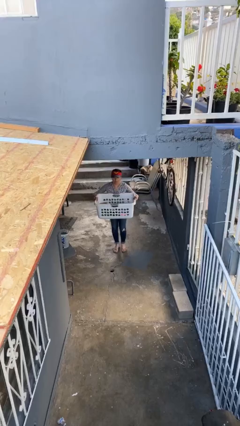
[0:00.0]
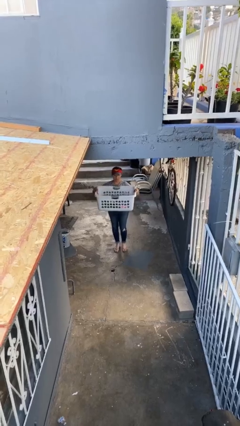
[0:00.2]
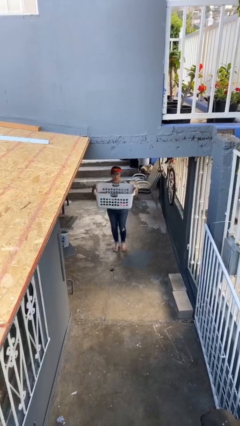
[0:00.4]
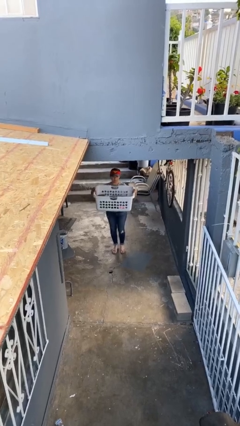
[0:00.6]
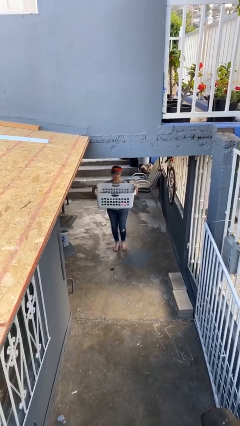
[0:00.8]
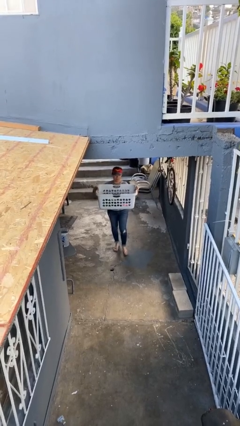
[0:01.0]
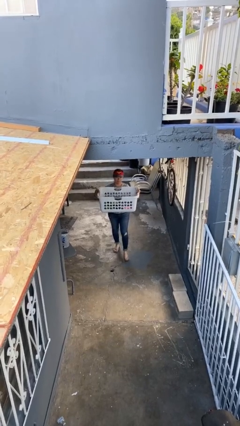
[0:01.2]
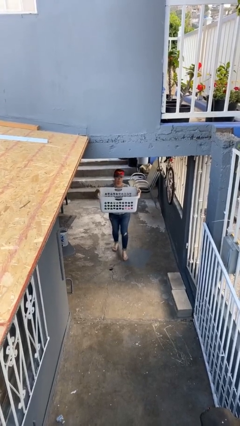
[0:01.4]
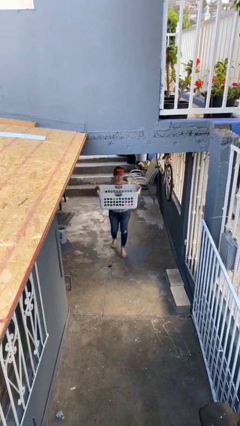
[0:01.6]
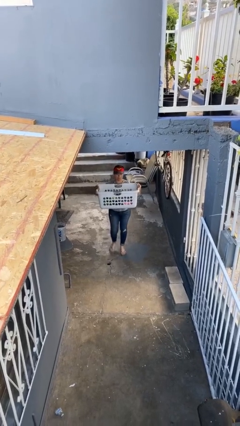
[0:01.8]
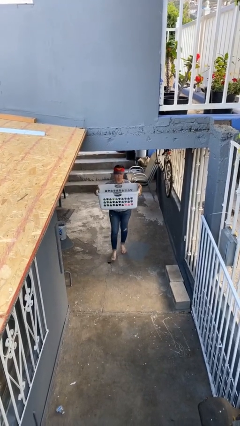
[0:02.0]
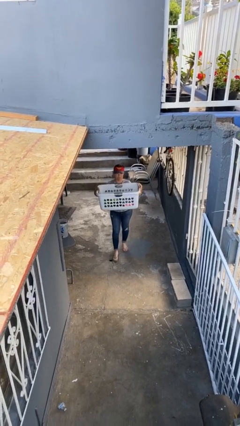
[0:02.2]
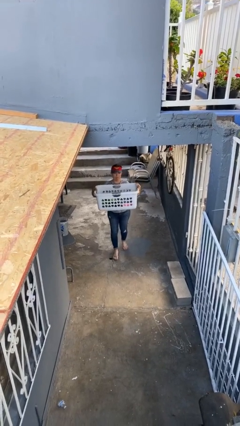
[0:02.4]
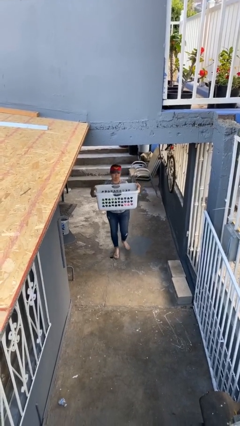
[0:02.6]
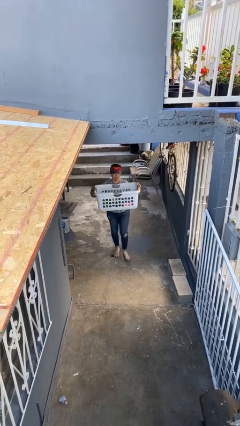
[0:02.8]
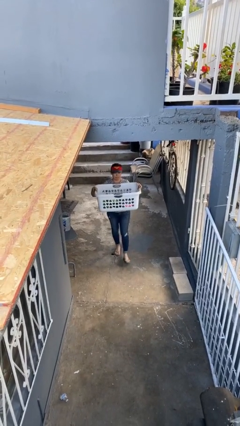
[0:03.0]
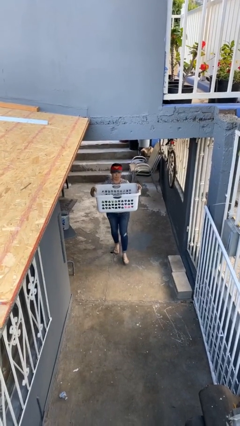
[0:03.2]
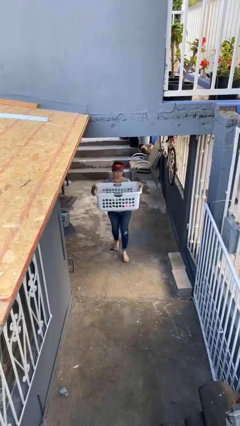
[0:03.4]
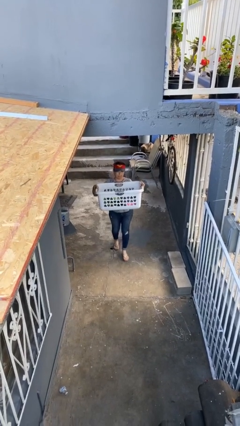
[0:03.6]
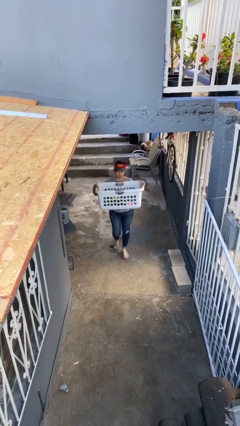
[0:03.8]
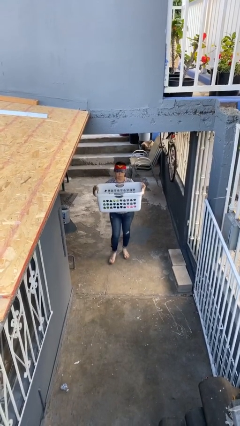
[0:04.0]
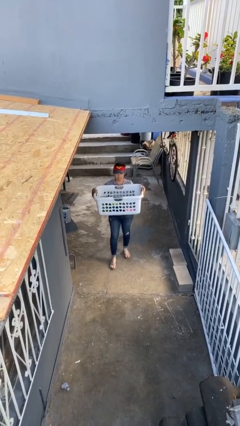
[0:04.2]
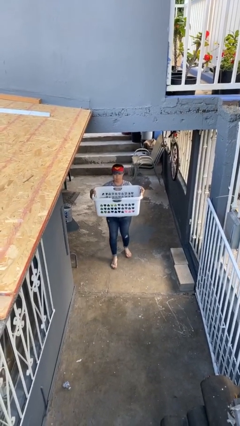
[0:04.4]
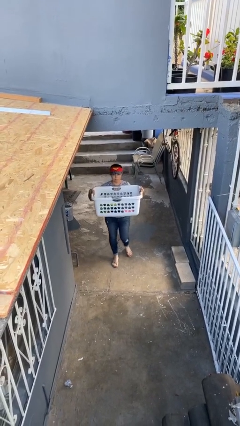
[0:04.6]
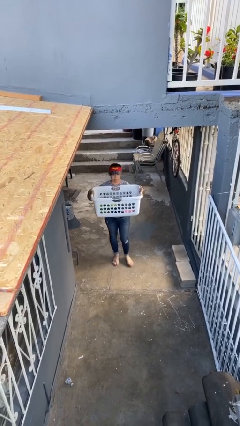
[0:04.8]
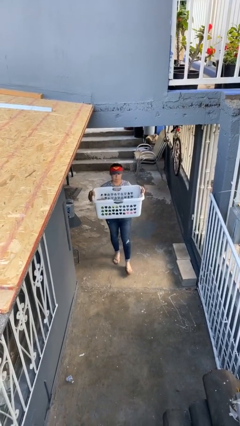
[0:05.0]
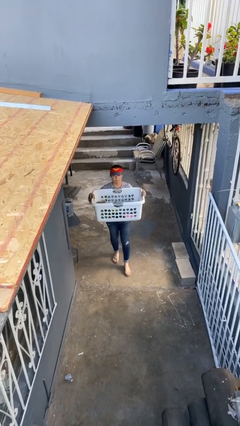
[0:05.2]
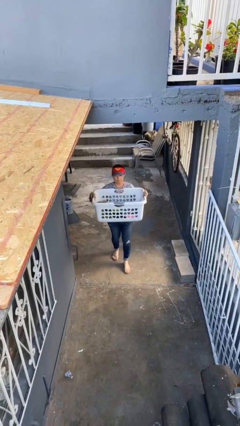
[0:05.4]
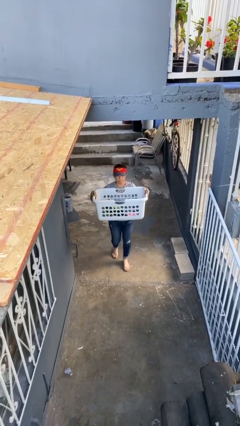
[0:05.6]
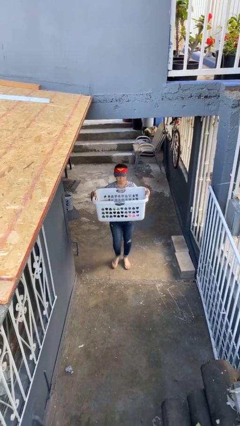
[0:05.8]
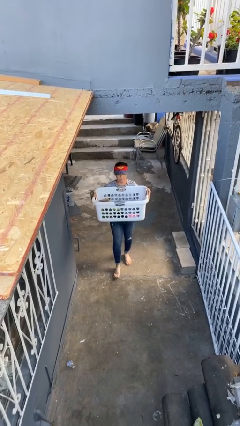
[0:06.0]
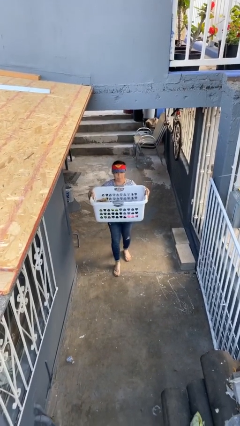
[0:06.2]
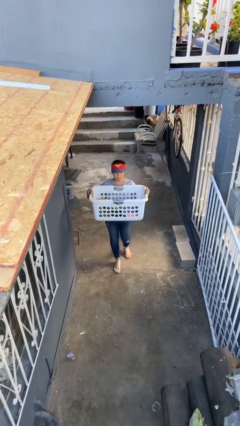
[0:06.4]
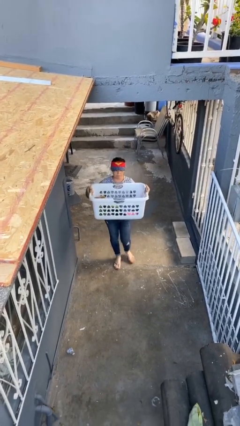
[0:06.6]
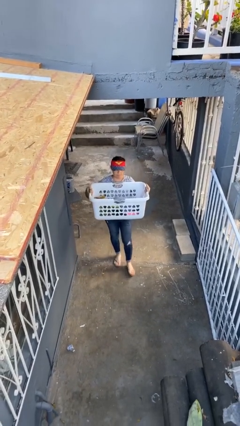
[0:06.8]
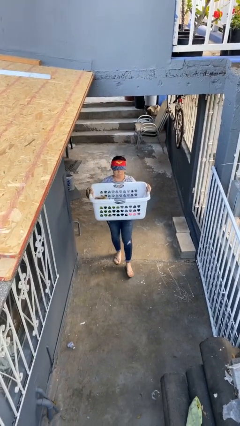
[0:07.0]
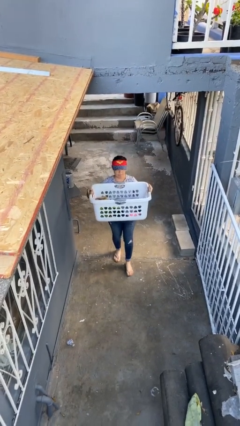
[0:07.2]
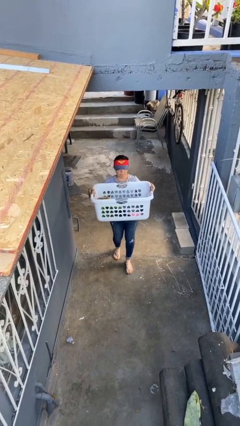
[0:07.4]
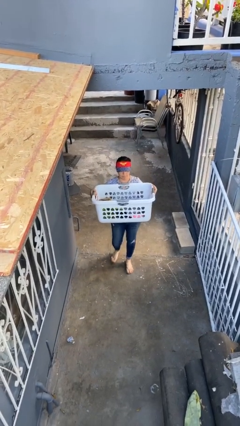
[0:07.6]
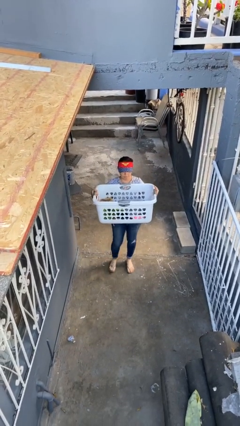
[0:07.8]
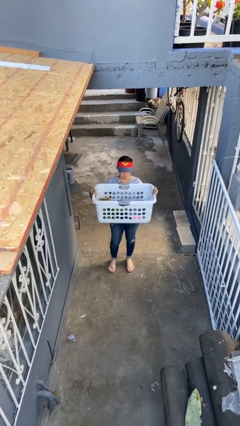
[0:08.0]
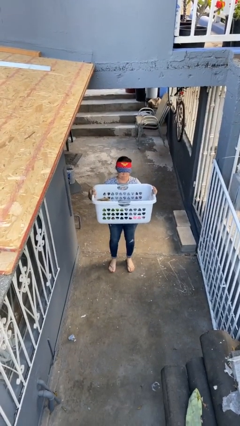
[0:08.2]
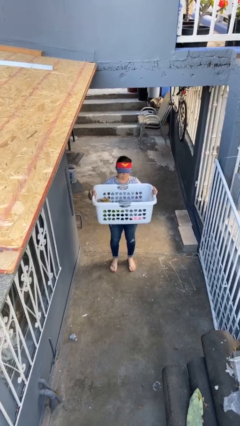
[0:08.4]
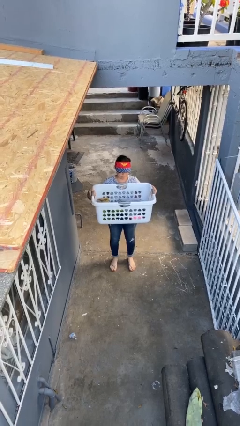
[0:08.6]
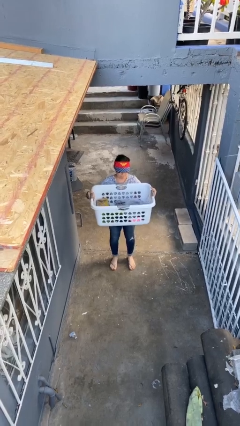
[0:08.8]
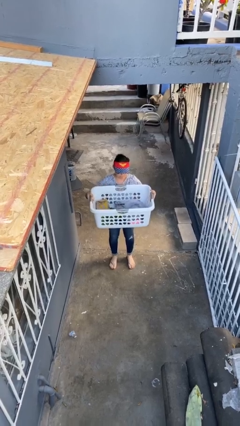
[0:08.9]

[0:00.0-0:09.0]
person carries heavy object

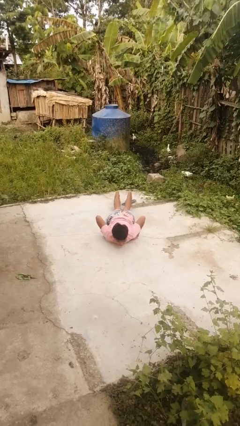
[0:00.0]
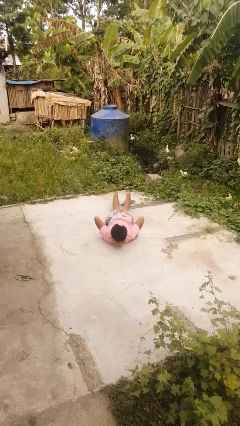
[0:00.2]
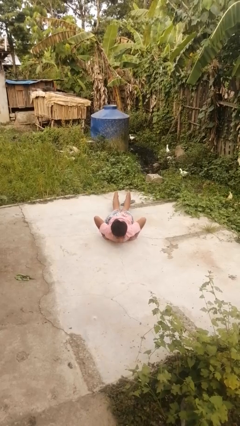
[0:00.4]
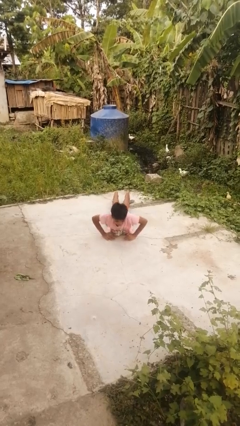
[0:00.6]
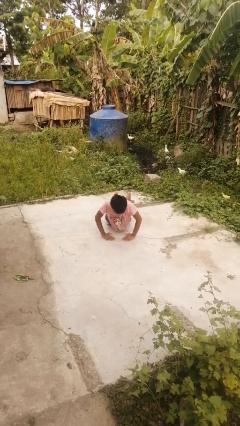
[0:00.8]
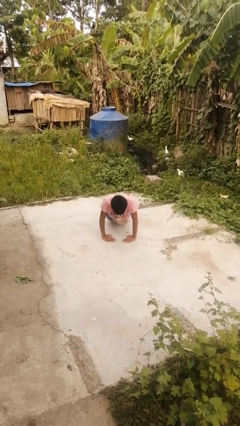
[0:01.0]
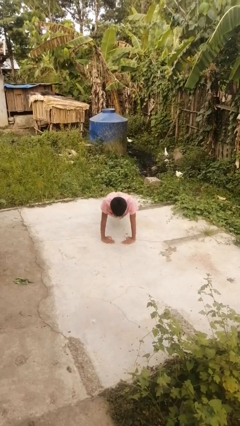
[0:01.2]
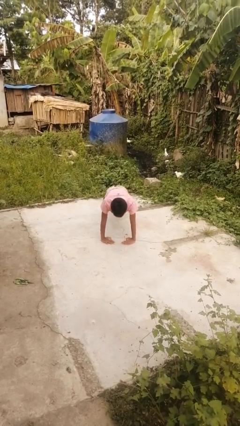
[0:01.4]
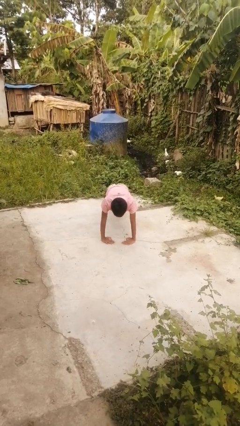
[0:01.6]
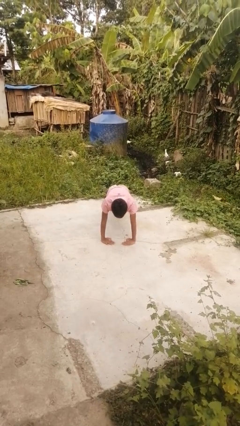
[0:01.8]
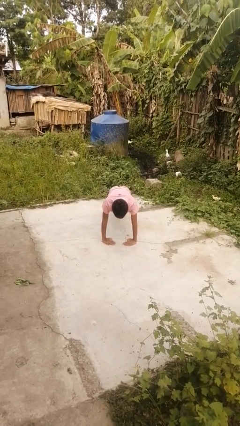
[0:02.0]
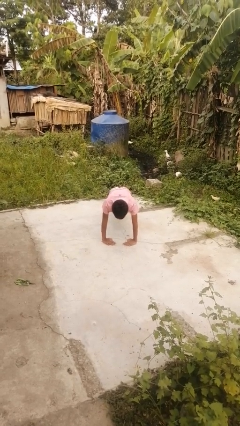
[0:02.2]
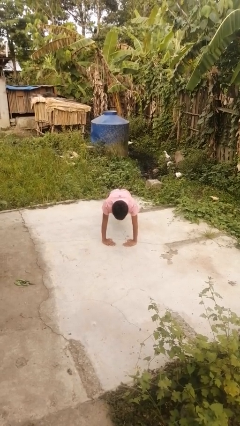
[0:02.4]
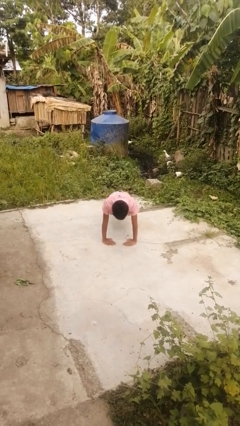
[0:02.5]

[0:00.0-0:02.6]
person exercises with pushup

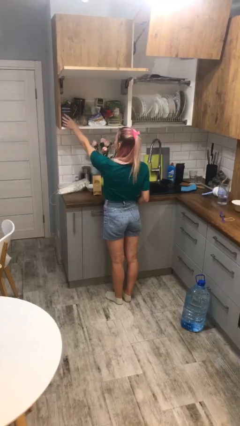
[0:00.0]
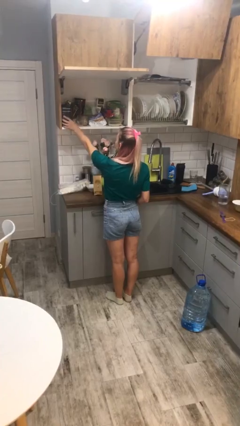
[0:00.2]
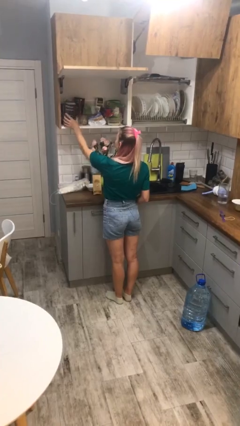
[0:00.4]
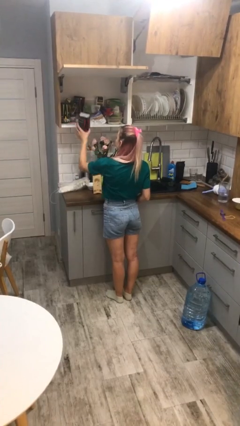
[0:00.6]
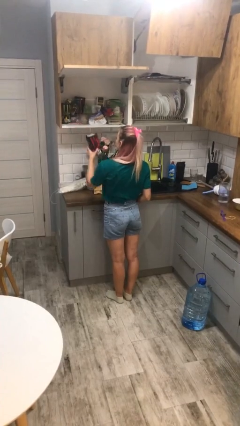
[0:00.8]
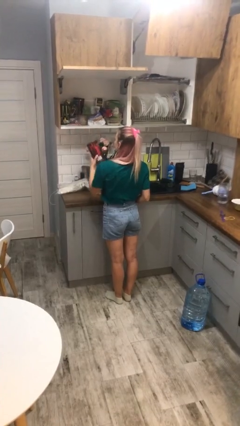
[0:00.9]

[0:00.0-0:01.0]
person picks up object from cabinet

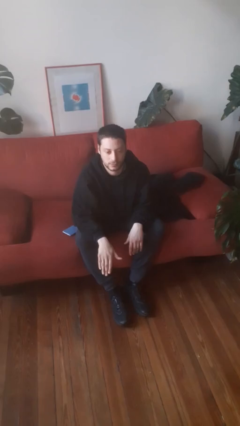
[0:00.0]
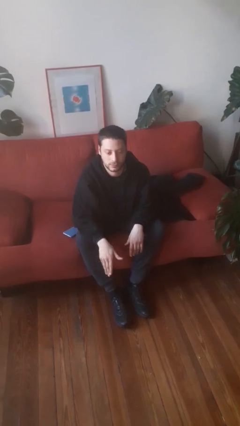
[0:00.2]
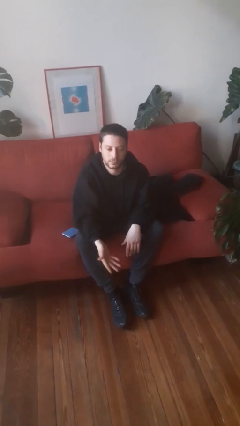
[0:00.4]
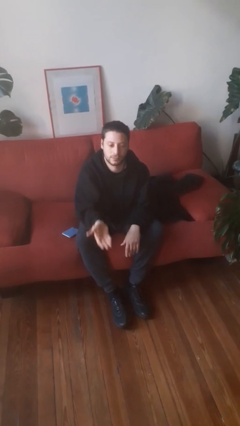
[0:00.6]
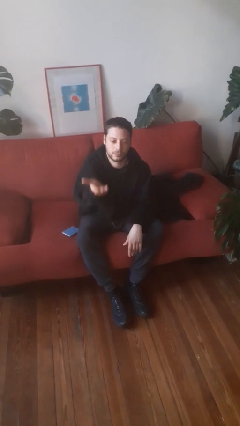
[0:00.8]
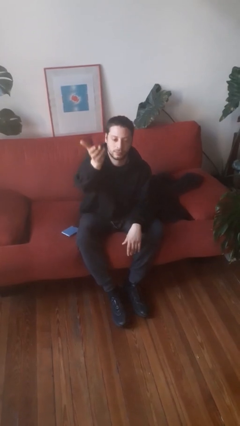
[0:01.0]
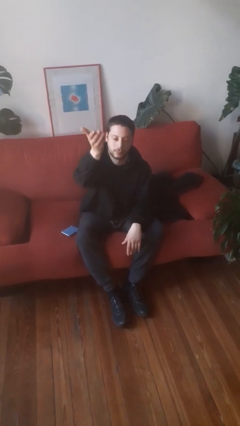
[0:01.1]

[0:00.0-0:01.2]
person gestures swipe up

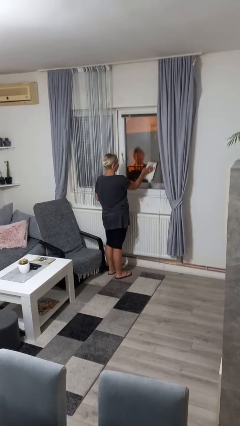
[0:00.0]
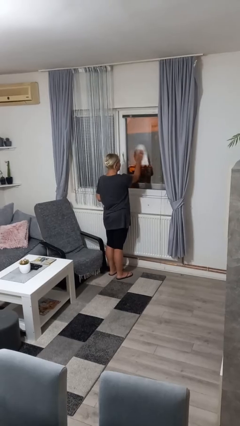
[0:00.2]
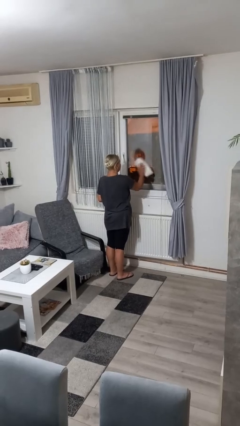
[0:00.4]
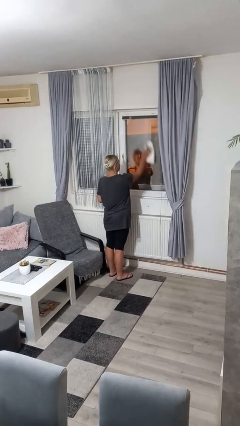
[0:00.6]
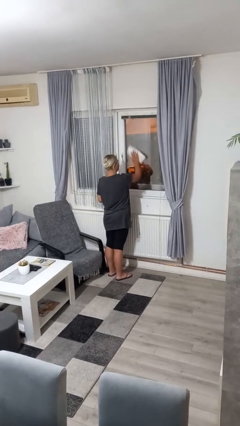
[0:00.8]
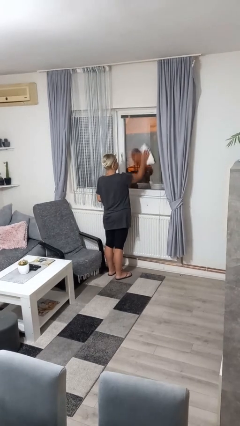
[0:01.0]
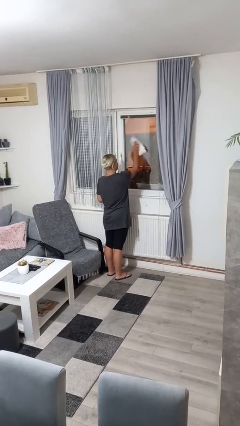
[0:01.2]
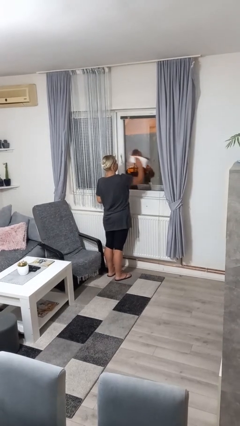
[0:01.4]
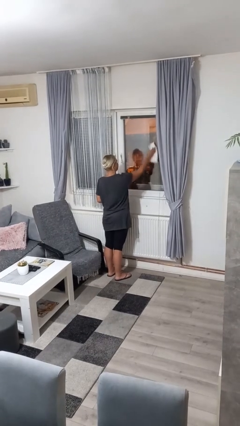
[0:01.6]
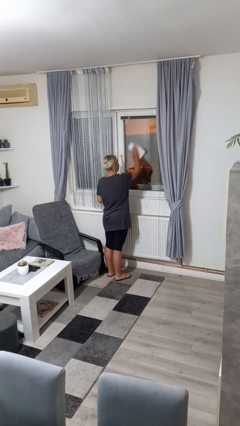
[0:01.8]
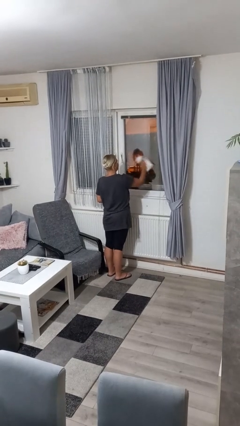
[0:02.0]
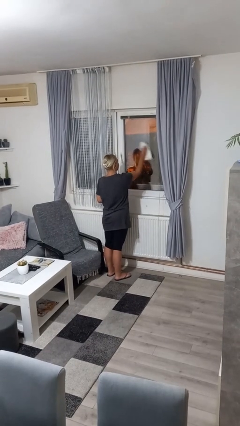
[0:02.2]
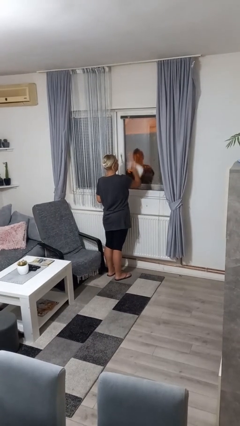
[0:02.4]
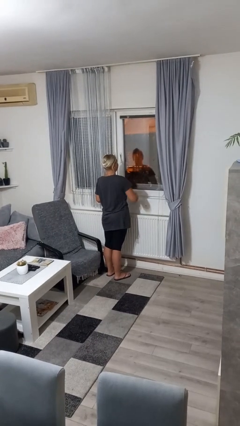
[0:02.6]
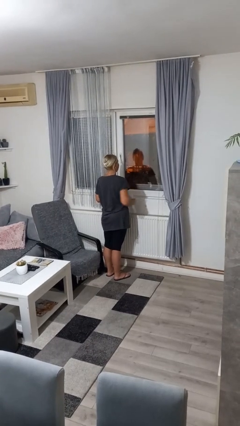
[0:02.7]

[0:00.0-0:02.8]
person washes window

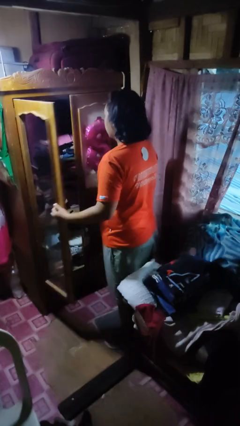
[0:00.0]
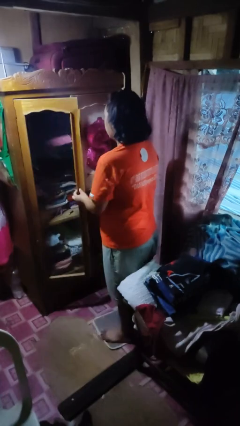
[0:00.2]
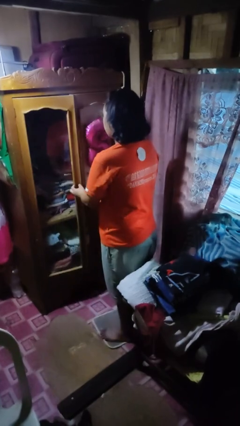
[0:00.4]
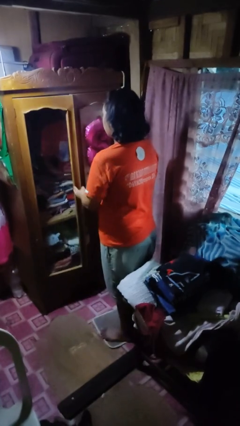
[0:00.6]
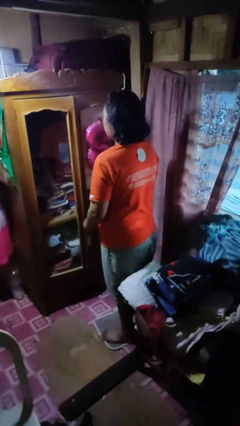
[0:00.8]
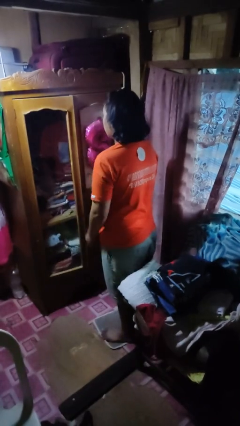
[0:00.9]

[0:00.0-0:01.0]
person closes closet door
